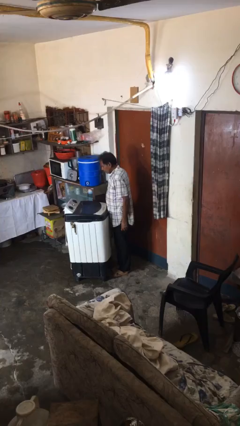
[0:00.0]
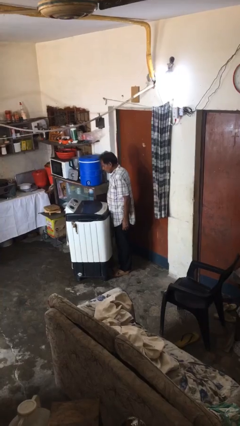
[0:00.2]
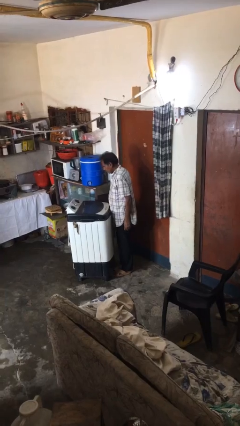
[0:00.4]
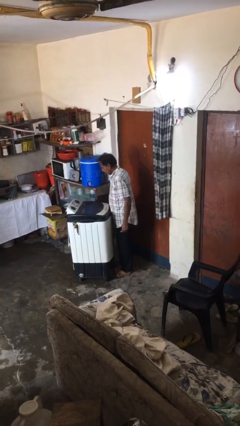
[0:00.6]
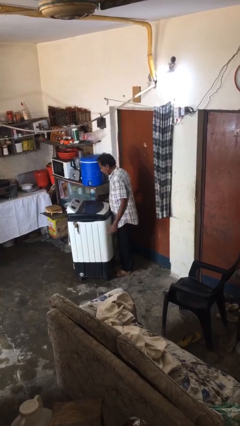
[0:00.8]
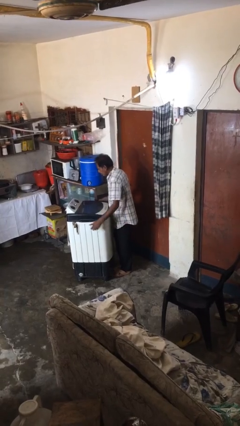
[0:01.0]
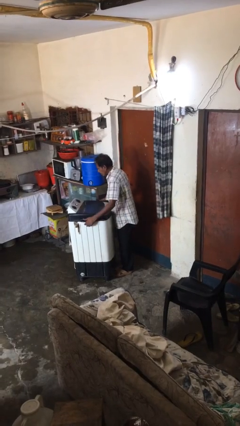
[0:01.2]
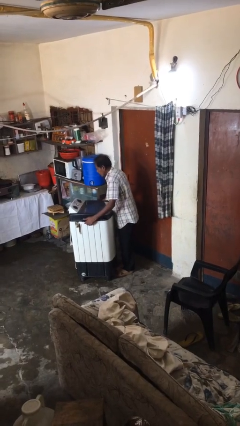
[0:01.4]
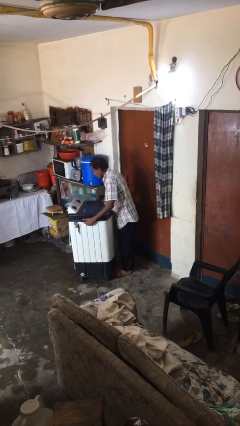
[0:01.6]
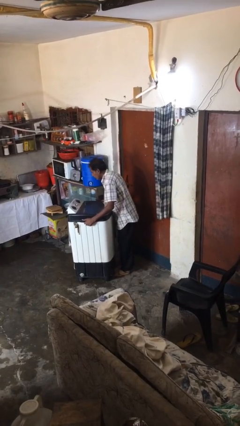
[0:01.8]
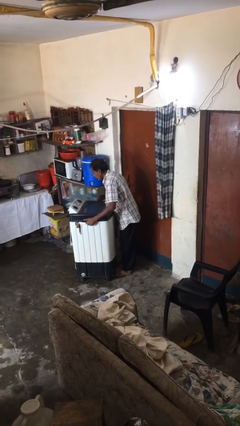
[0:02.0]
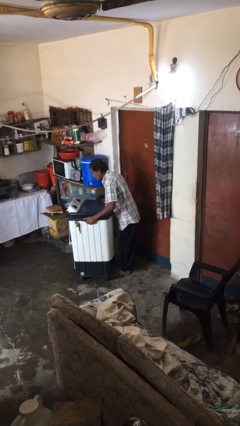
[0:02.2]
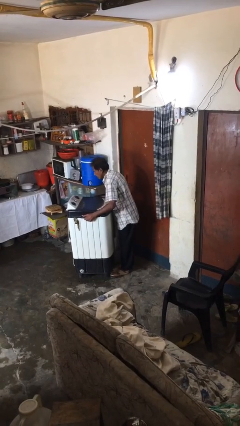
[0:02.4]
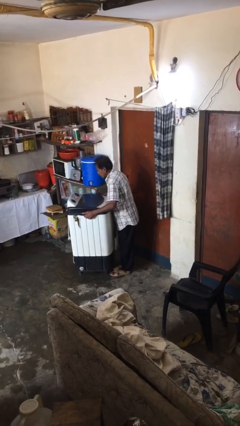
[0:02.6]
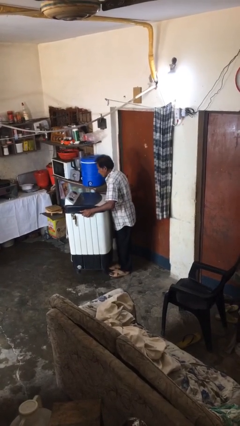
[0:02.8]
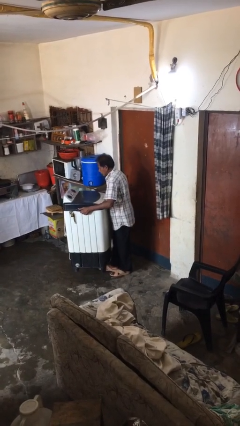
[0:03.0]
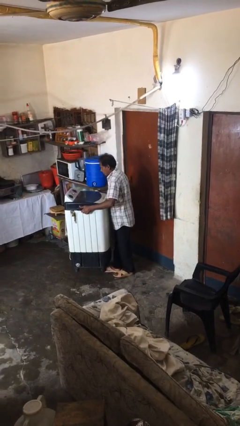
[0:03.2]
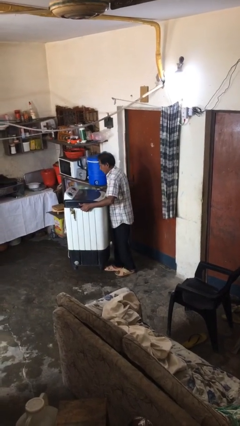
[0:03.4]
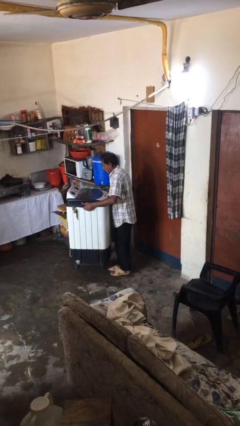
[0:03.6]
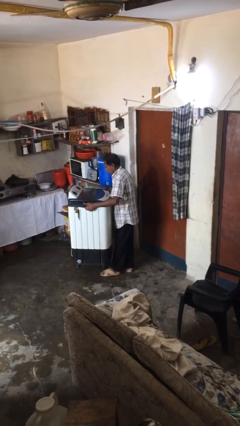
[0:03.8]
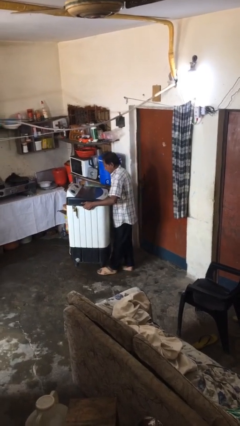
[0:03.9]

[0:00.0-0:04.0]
person picks up object from floor

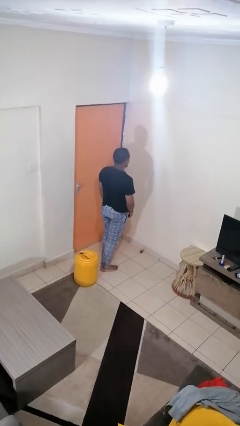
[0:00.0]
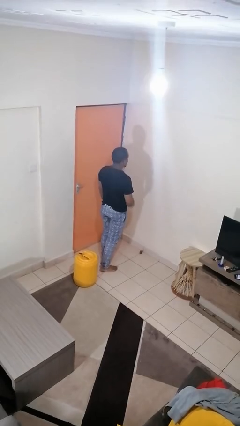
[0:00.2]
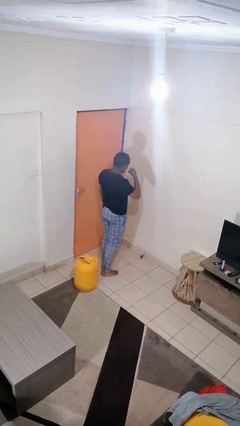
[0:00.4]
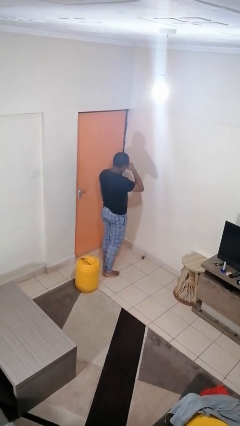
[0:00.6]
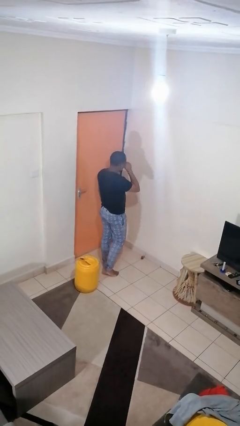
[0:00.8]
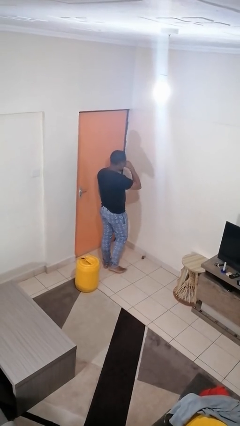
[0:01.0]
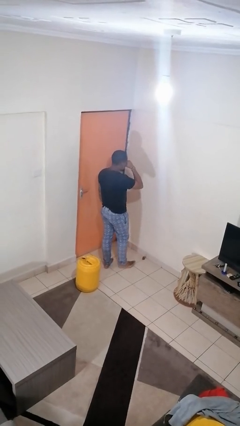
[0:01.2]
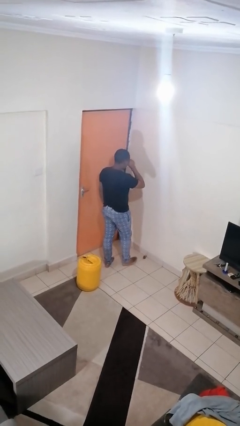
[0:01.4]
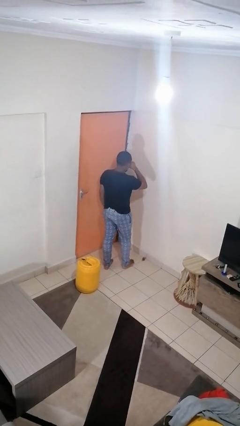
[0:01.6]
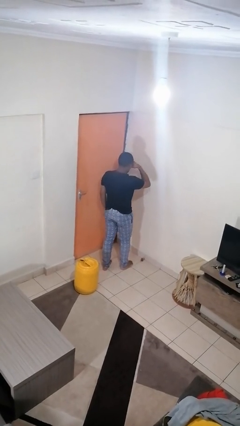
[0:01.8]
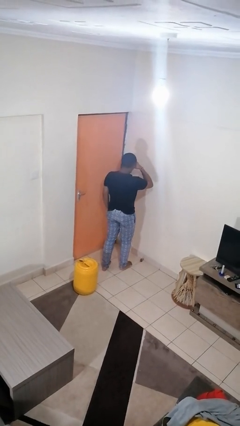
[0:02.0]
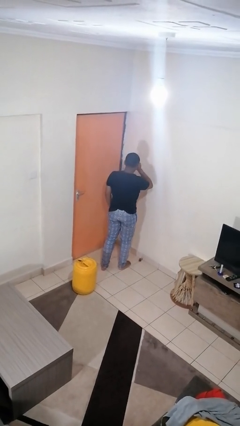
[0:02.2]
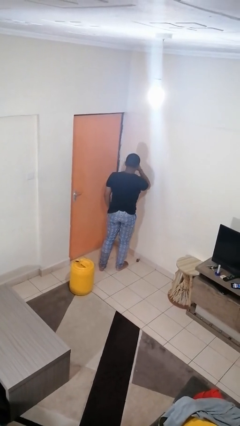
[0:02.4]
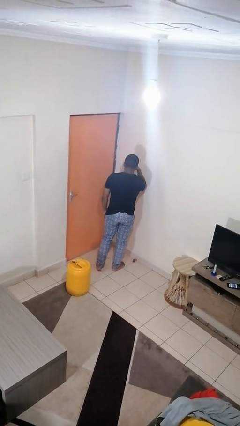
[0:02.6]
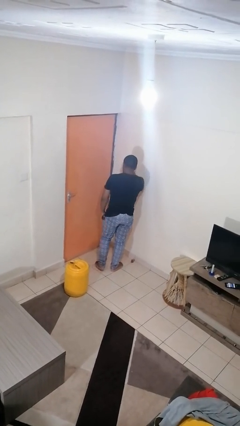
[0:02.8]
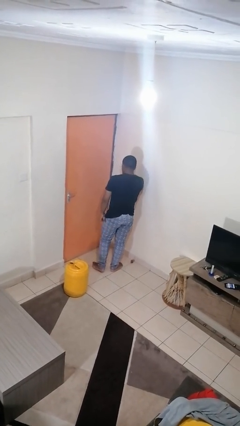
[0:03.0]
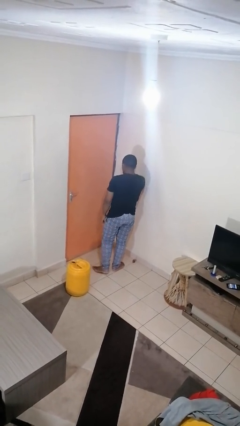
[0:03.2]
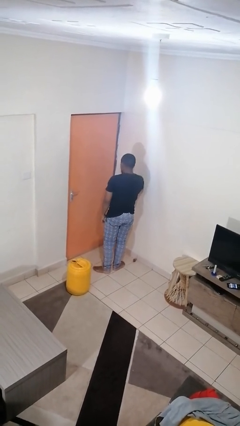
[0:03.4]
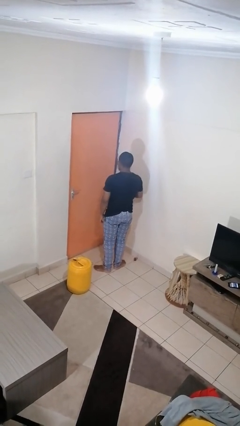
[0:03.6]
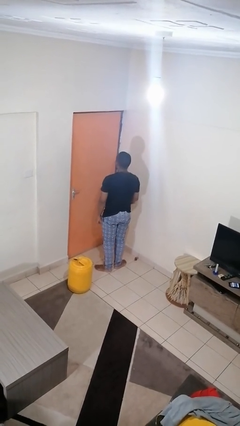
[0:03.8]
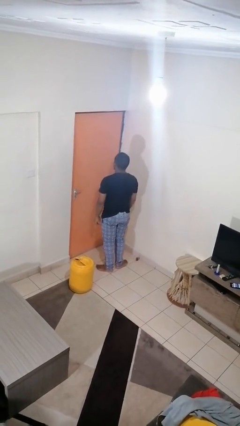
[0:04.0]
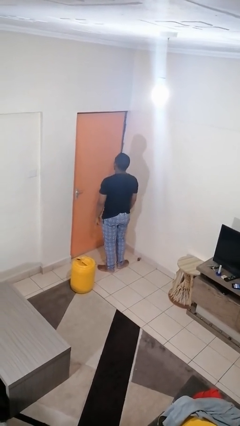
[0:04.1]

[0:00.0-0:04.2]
person rubs eyes

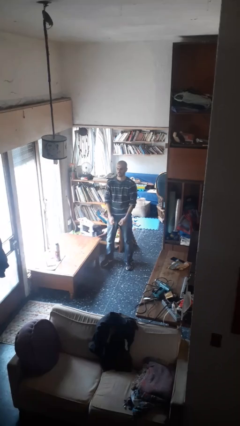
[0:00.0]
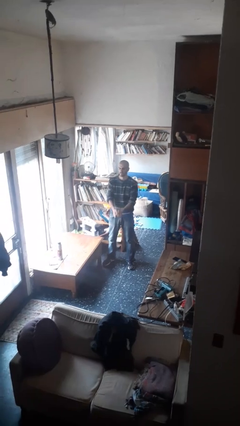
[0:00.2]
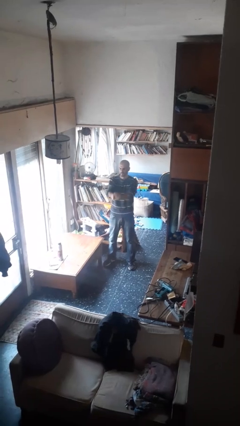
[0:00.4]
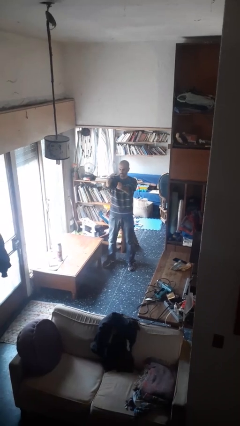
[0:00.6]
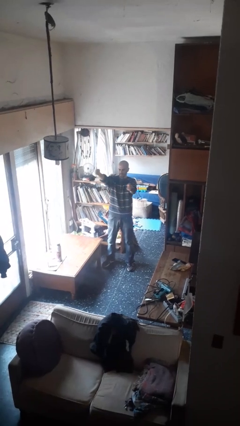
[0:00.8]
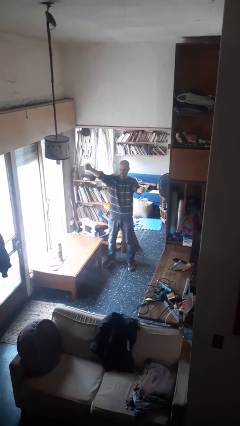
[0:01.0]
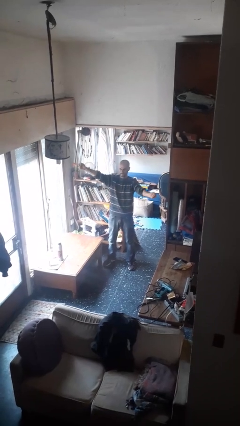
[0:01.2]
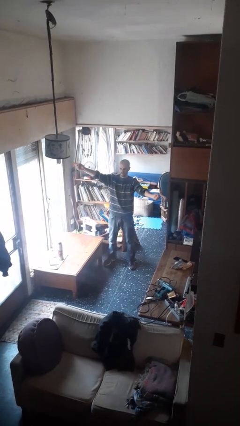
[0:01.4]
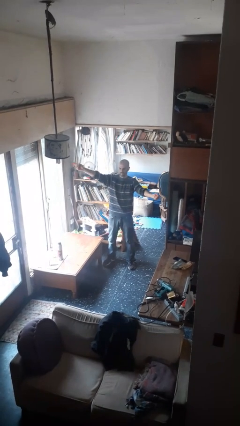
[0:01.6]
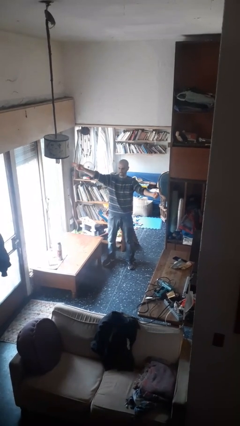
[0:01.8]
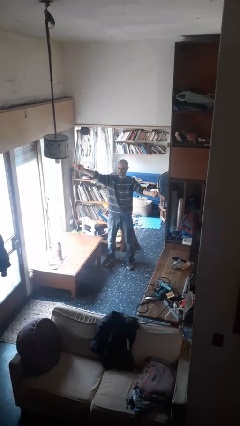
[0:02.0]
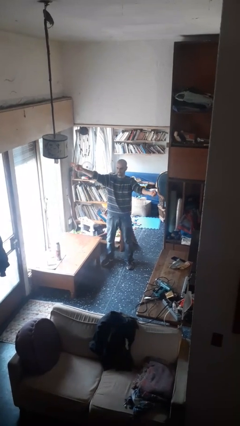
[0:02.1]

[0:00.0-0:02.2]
person gestures zoom in

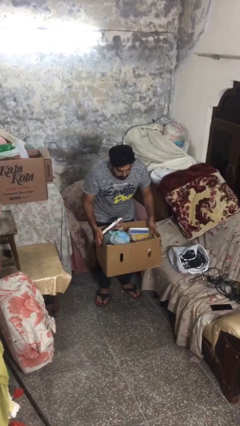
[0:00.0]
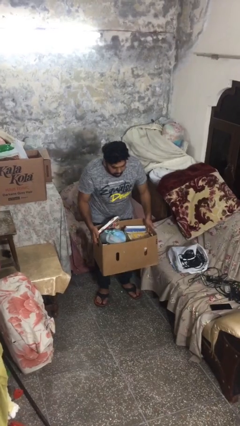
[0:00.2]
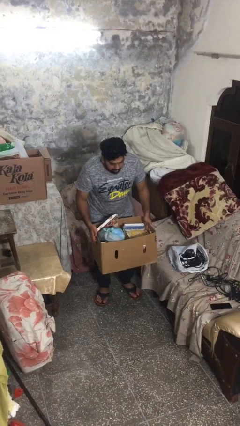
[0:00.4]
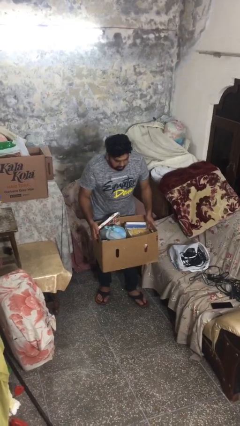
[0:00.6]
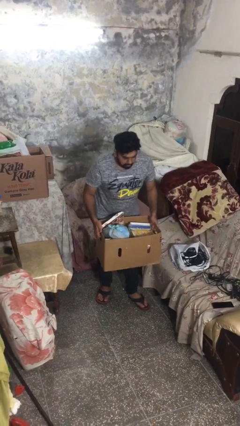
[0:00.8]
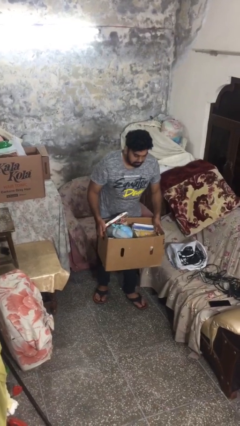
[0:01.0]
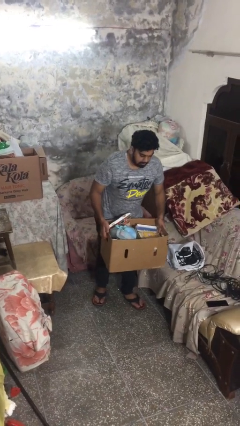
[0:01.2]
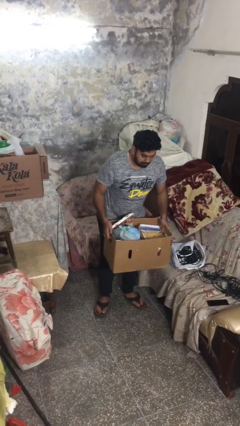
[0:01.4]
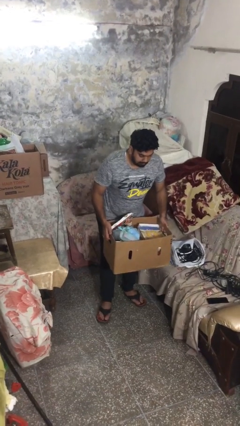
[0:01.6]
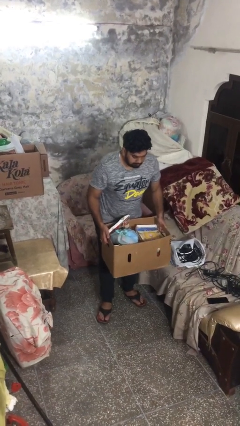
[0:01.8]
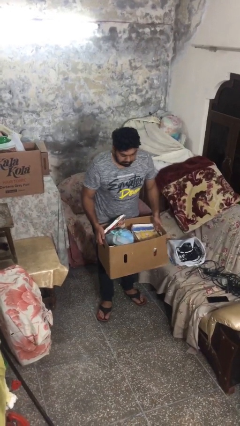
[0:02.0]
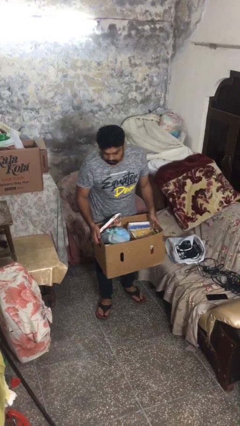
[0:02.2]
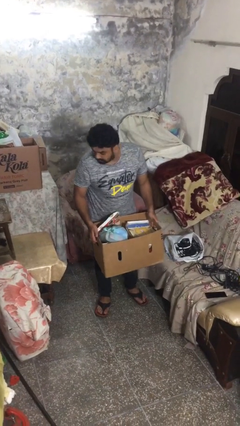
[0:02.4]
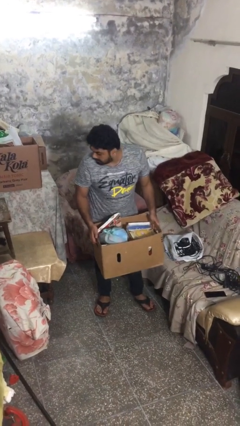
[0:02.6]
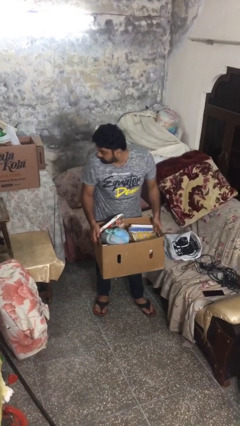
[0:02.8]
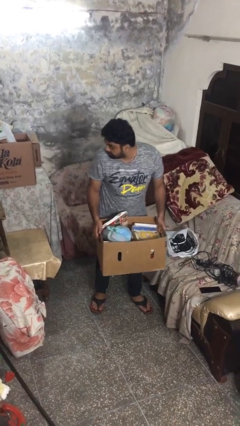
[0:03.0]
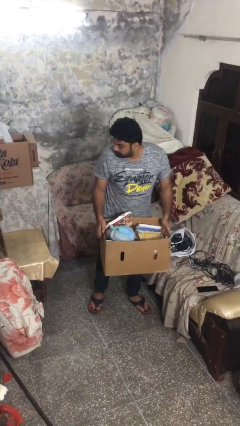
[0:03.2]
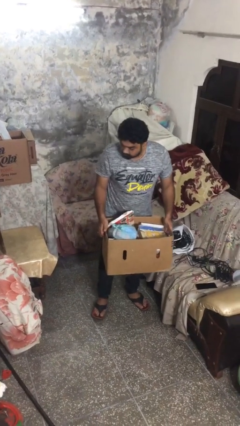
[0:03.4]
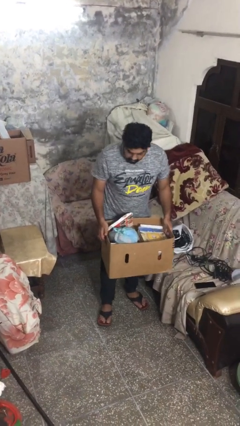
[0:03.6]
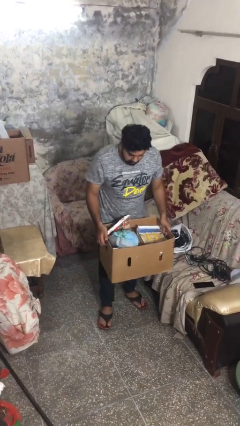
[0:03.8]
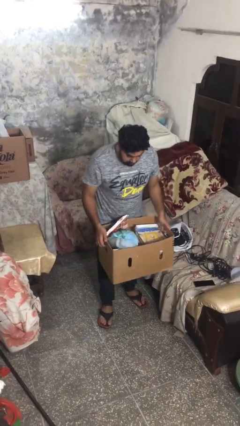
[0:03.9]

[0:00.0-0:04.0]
person carries heavy object

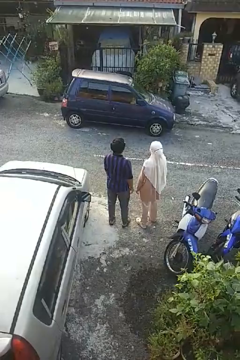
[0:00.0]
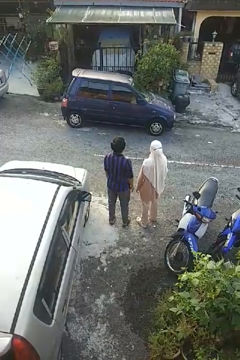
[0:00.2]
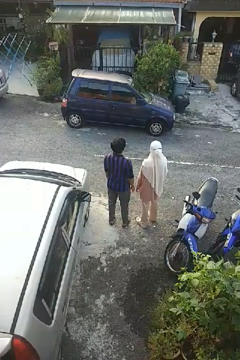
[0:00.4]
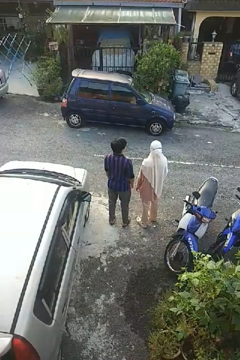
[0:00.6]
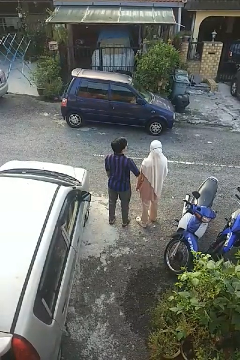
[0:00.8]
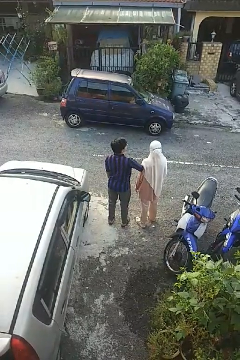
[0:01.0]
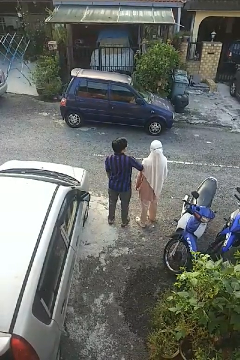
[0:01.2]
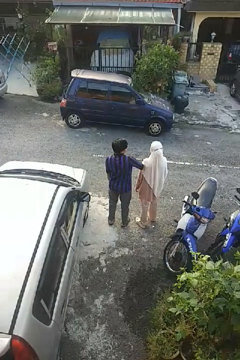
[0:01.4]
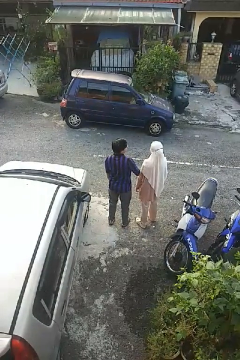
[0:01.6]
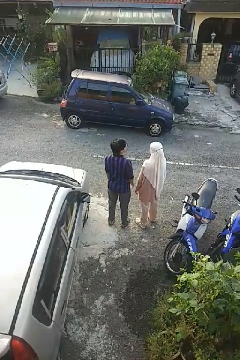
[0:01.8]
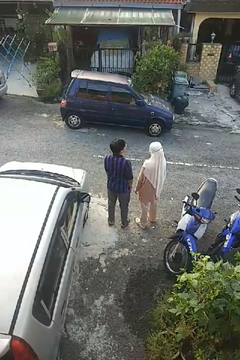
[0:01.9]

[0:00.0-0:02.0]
person nudges person with elbow

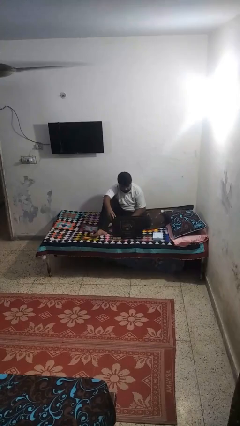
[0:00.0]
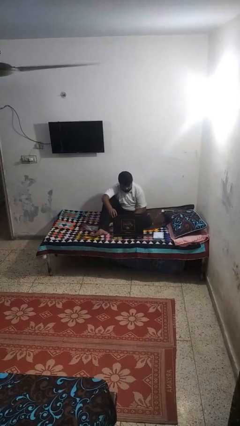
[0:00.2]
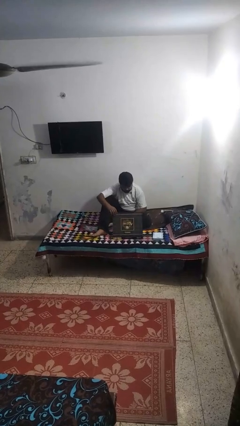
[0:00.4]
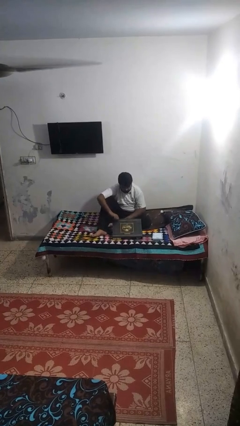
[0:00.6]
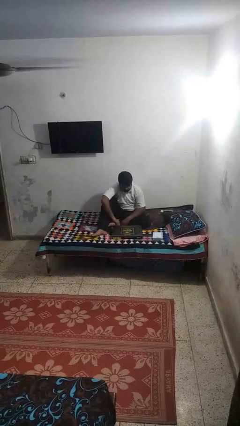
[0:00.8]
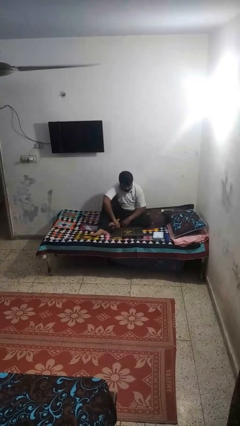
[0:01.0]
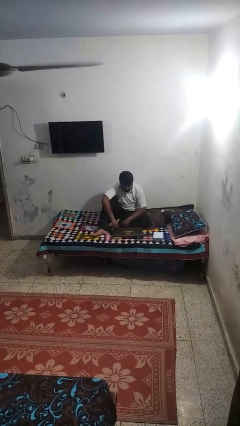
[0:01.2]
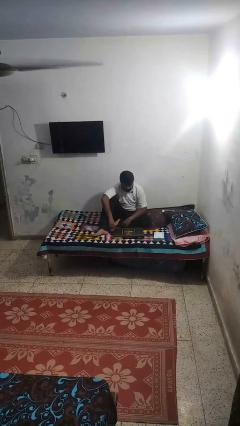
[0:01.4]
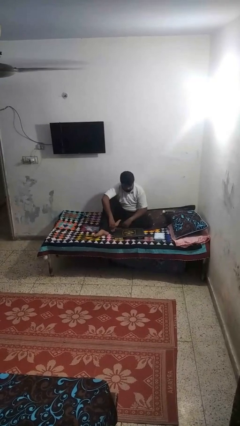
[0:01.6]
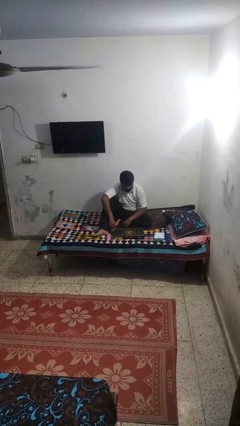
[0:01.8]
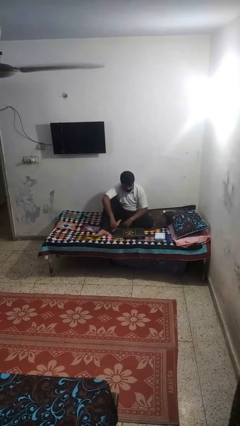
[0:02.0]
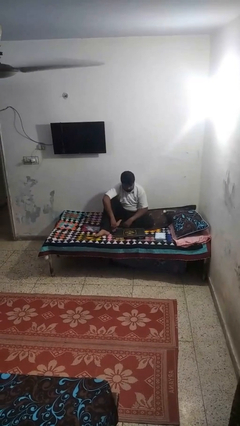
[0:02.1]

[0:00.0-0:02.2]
person closes laptop
